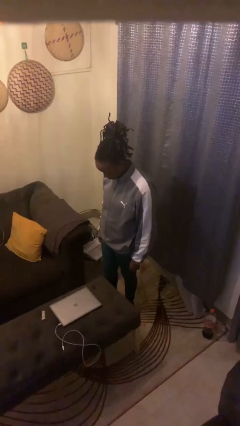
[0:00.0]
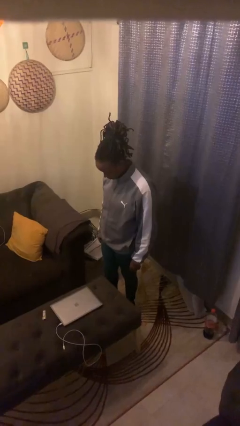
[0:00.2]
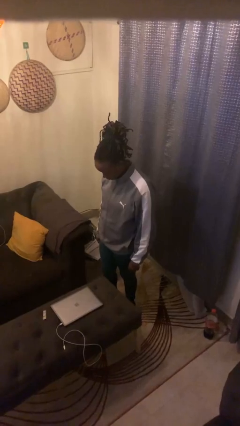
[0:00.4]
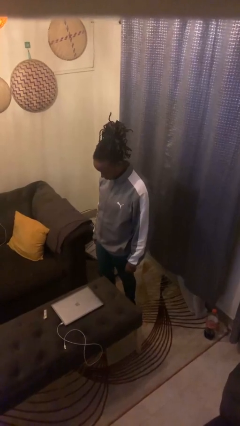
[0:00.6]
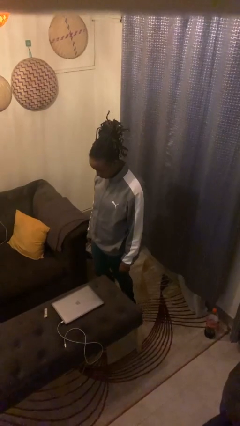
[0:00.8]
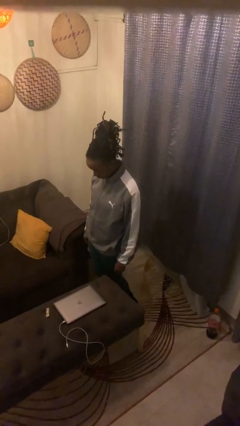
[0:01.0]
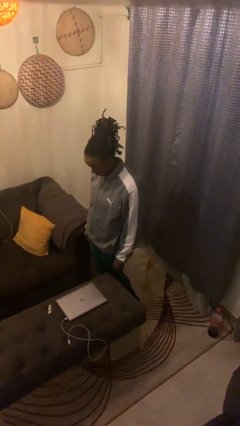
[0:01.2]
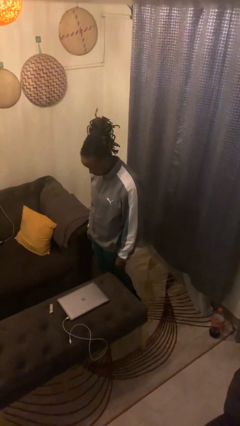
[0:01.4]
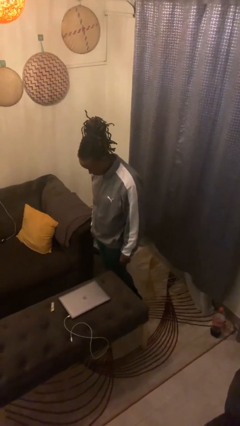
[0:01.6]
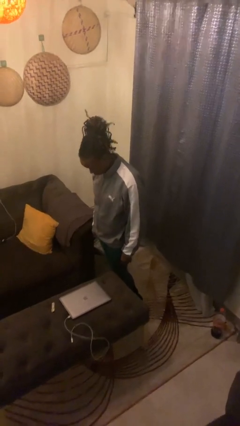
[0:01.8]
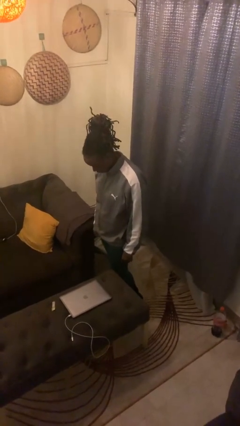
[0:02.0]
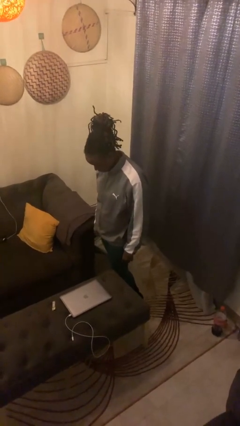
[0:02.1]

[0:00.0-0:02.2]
person bumps into table

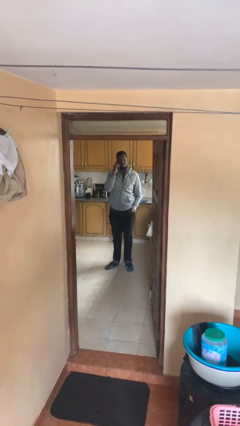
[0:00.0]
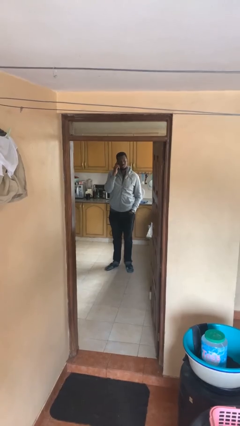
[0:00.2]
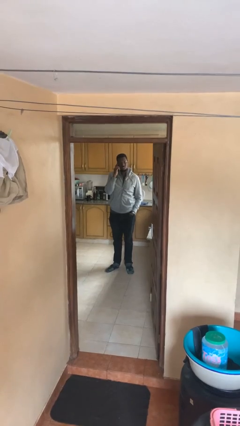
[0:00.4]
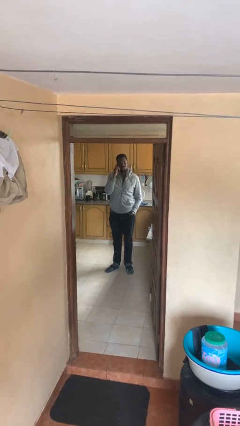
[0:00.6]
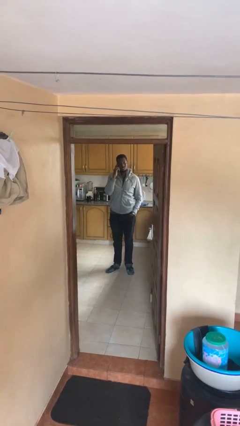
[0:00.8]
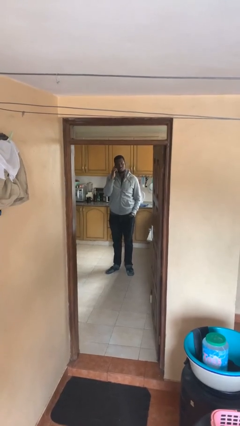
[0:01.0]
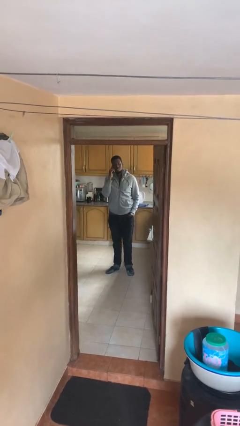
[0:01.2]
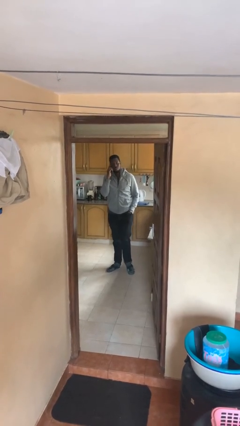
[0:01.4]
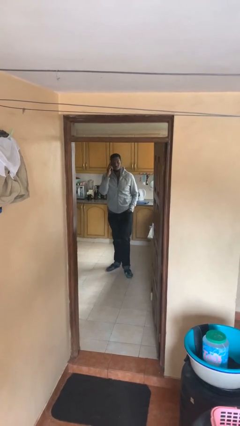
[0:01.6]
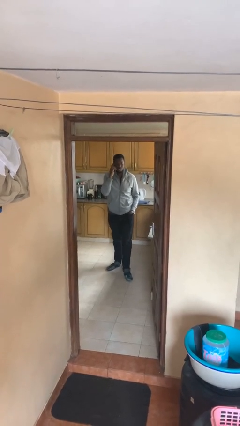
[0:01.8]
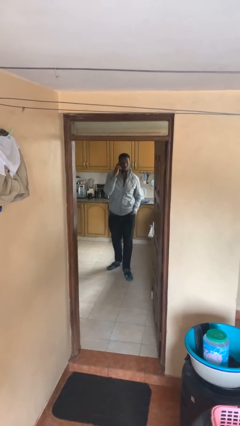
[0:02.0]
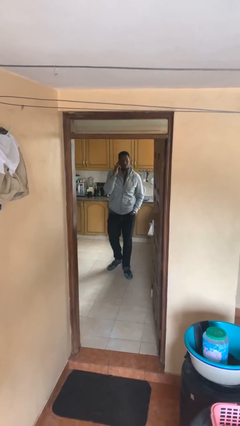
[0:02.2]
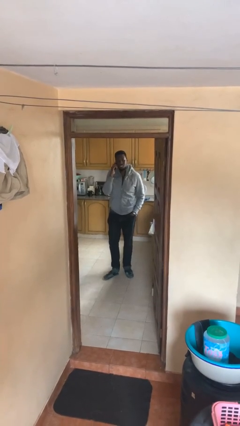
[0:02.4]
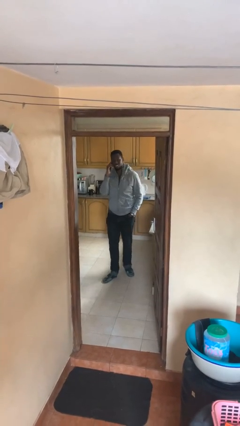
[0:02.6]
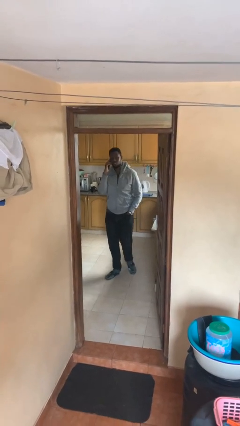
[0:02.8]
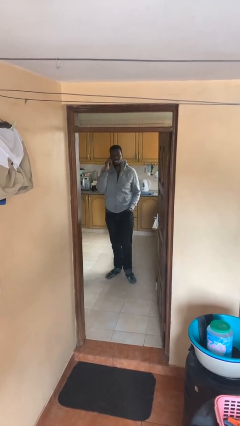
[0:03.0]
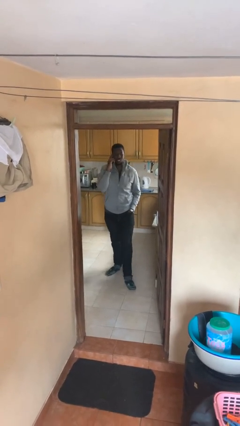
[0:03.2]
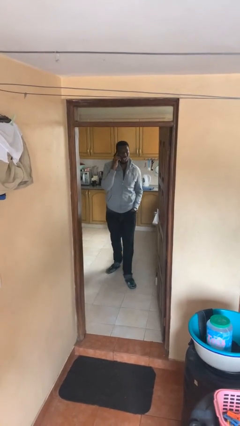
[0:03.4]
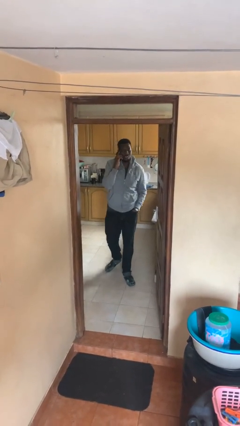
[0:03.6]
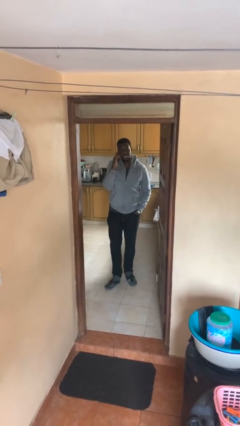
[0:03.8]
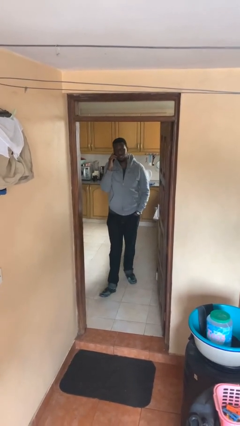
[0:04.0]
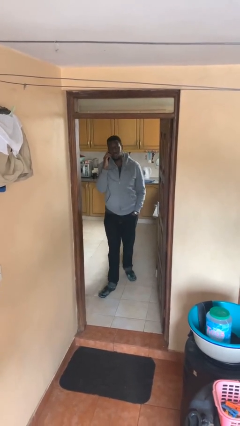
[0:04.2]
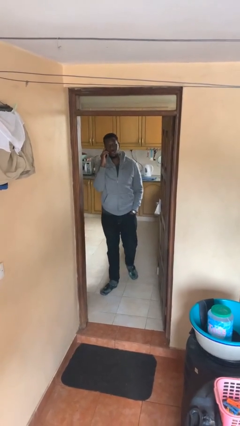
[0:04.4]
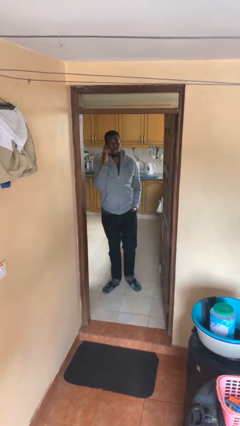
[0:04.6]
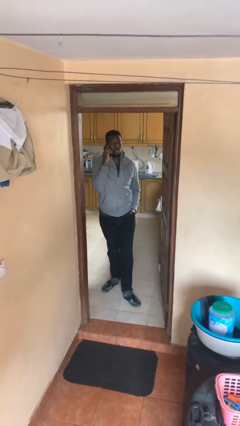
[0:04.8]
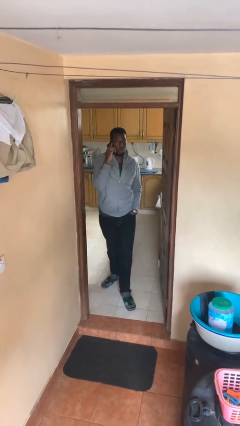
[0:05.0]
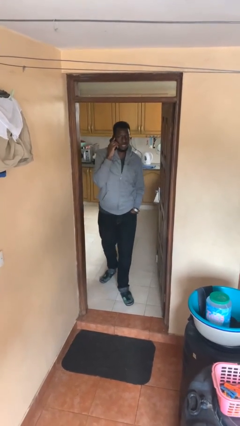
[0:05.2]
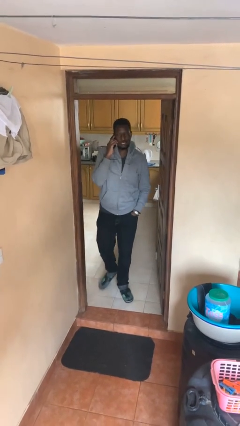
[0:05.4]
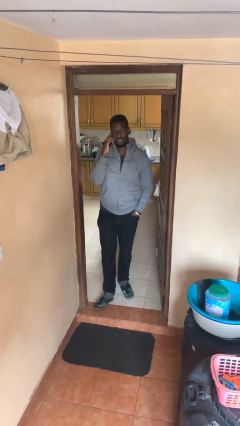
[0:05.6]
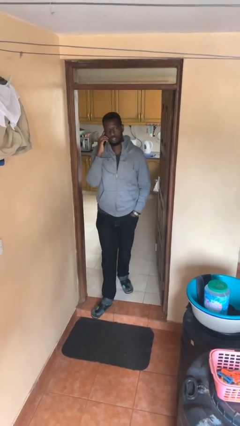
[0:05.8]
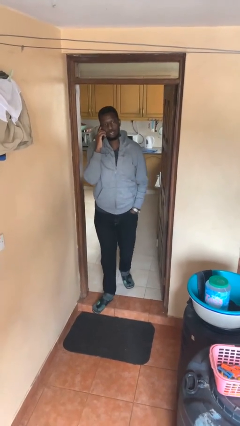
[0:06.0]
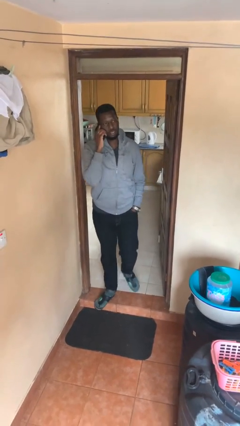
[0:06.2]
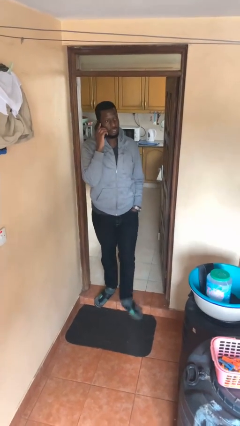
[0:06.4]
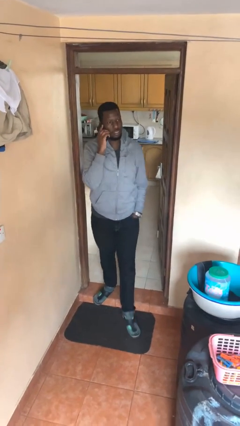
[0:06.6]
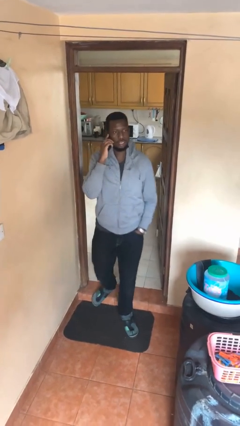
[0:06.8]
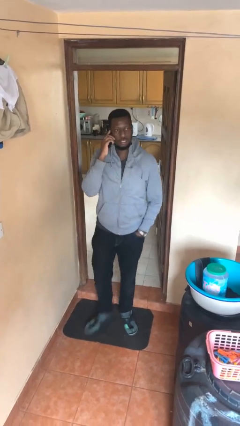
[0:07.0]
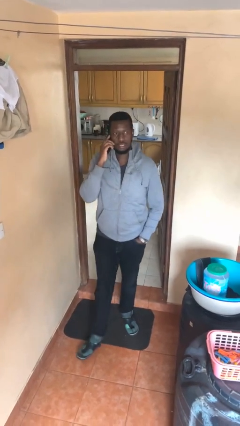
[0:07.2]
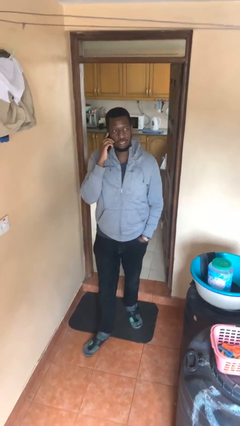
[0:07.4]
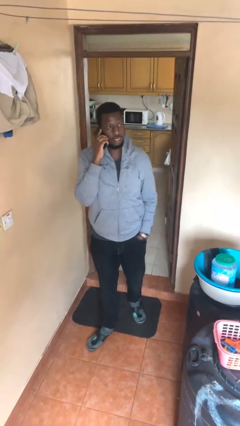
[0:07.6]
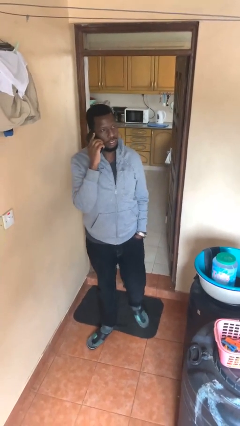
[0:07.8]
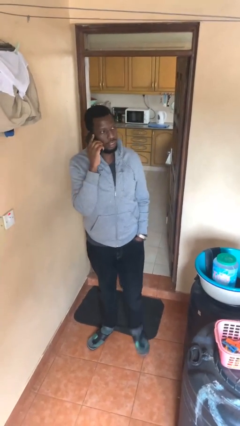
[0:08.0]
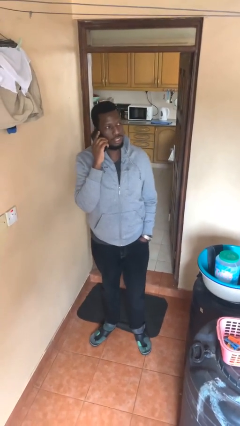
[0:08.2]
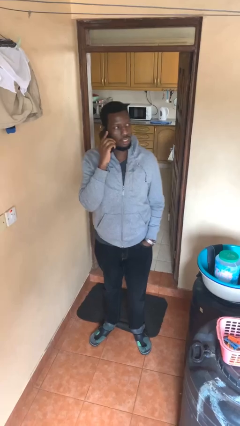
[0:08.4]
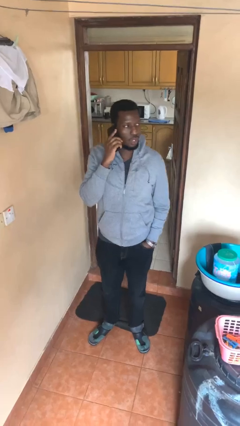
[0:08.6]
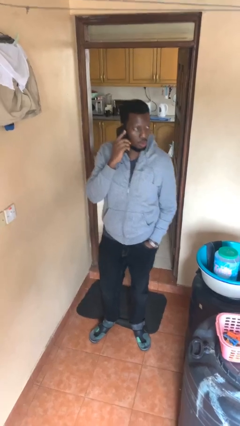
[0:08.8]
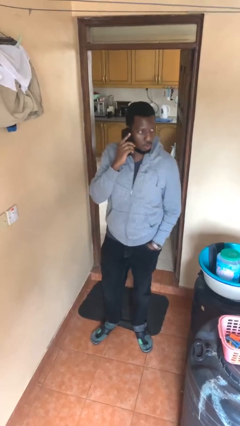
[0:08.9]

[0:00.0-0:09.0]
person enters scene through structure

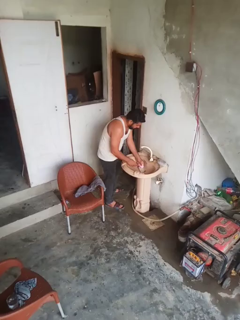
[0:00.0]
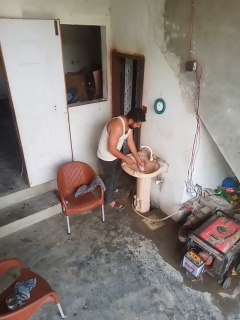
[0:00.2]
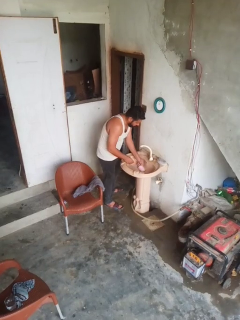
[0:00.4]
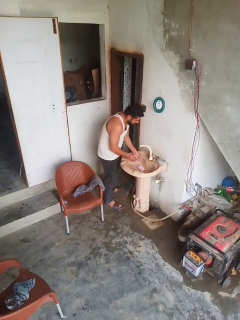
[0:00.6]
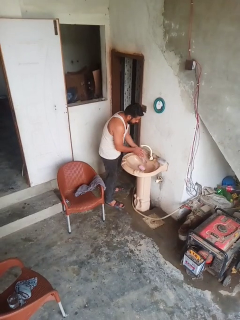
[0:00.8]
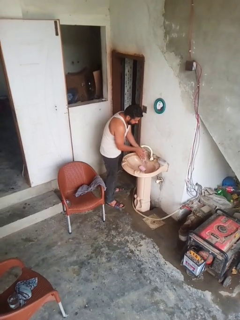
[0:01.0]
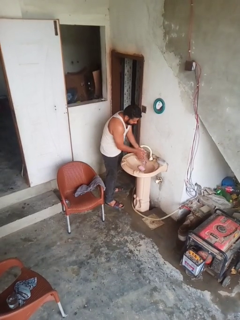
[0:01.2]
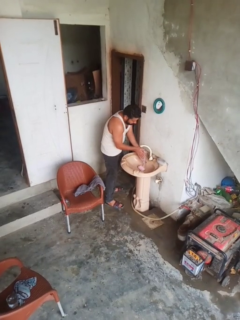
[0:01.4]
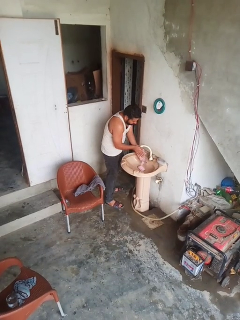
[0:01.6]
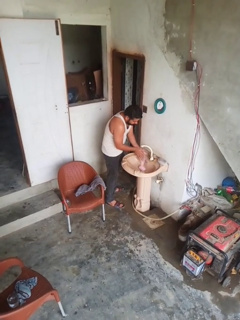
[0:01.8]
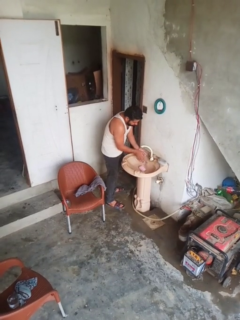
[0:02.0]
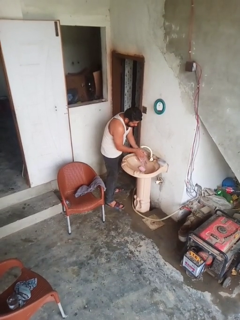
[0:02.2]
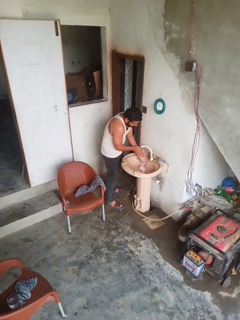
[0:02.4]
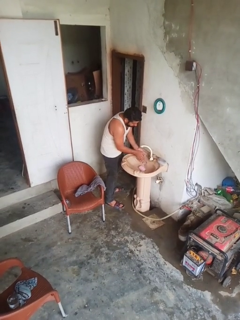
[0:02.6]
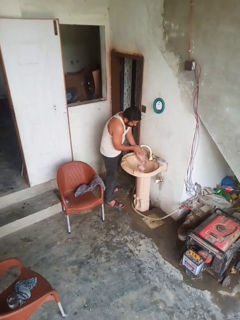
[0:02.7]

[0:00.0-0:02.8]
person washes hands

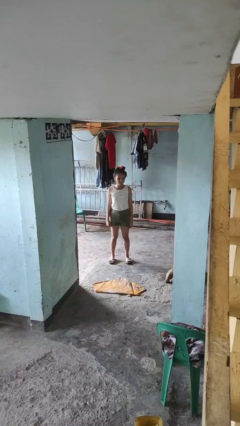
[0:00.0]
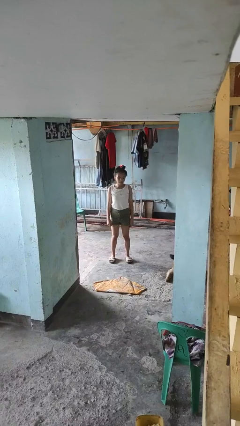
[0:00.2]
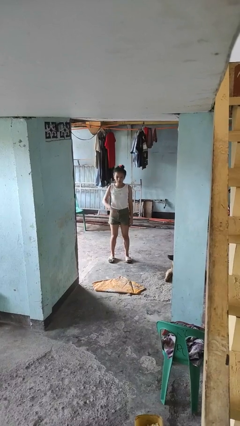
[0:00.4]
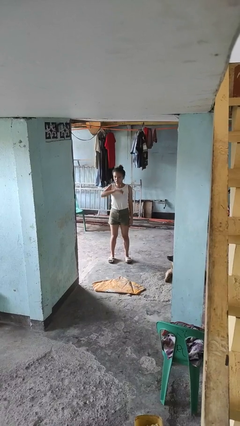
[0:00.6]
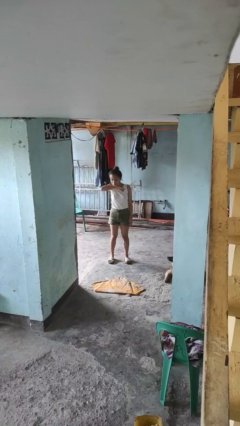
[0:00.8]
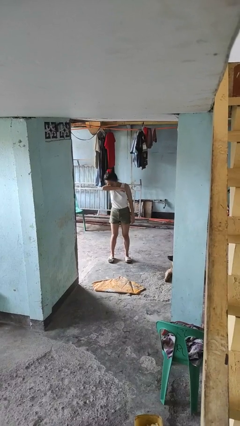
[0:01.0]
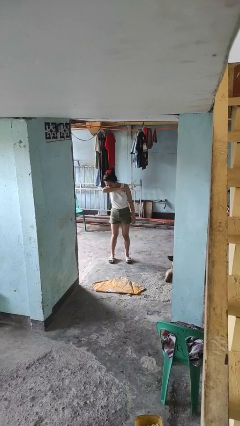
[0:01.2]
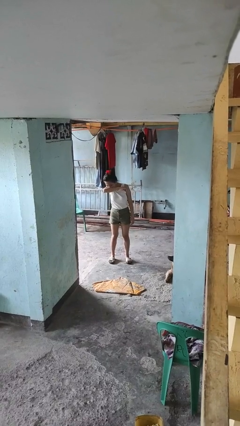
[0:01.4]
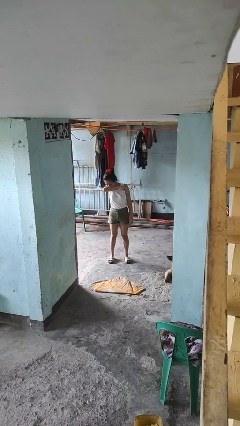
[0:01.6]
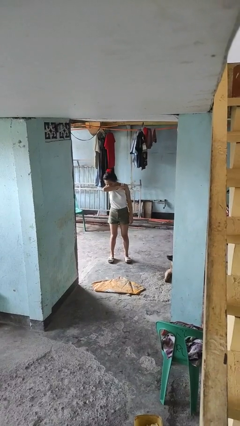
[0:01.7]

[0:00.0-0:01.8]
person sneezes into arm

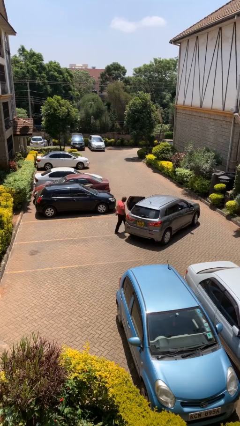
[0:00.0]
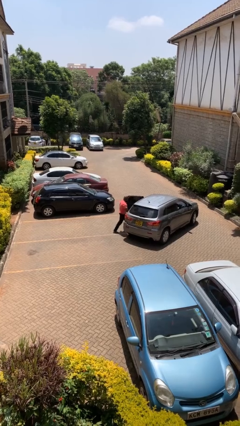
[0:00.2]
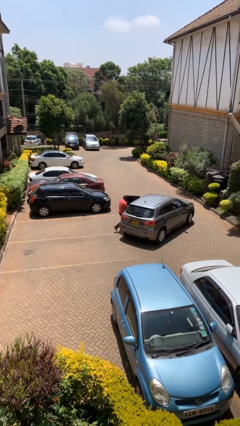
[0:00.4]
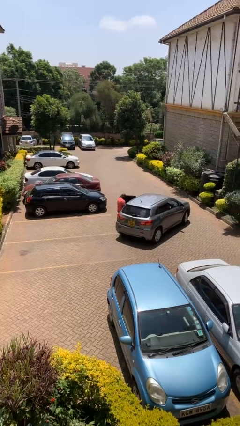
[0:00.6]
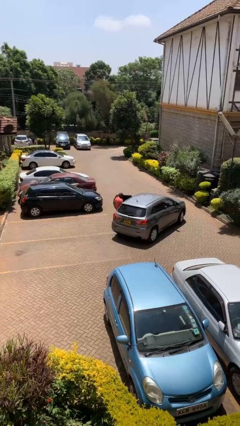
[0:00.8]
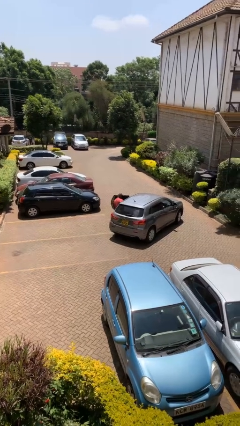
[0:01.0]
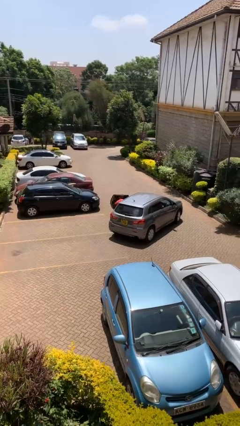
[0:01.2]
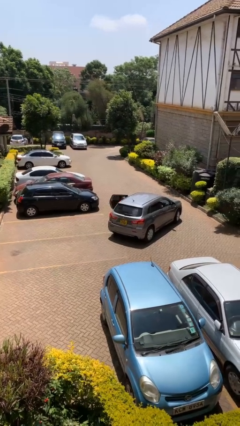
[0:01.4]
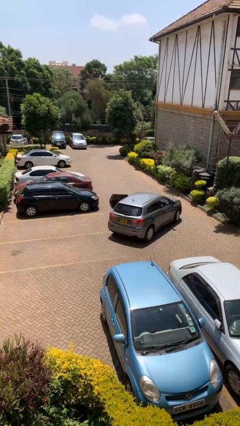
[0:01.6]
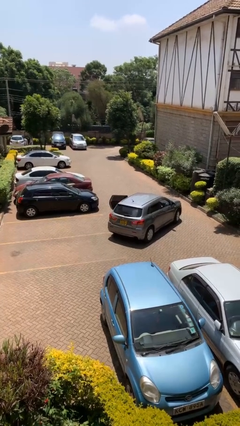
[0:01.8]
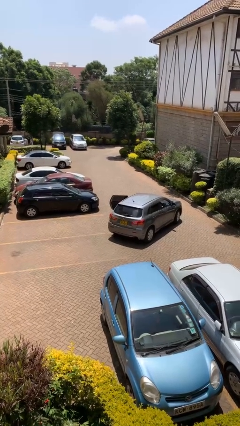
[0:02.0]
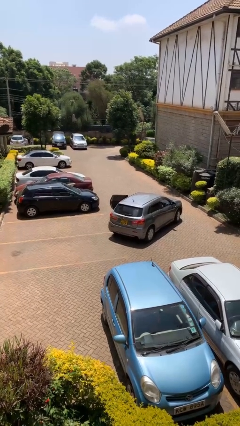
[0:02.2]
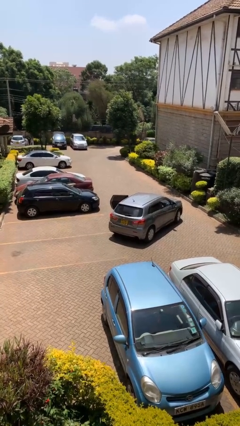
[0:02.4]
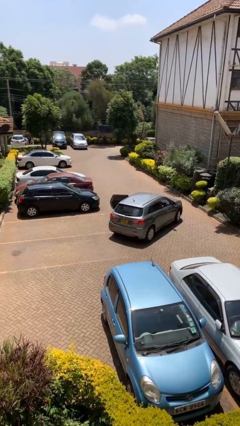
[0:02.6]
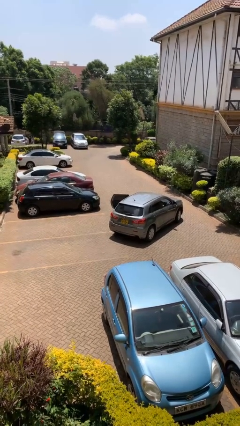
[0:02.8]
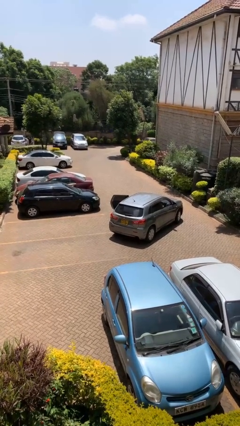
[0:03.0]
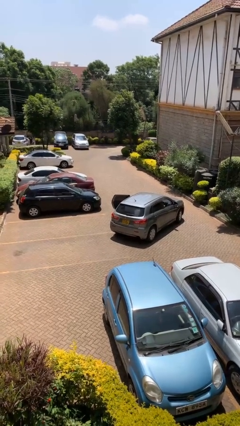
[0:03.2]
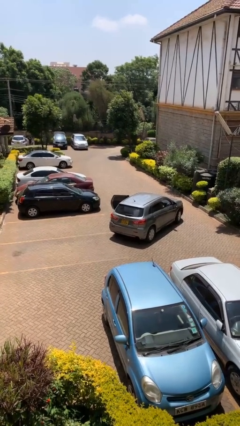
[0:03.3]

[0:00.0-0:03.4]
person enters car
